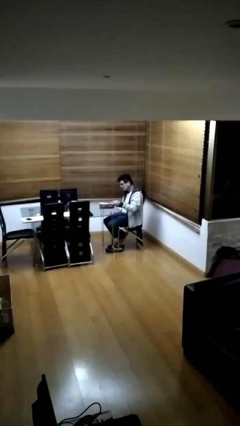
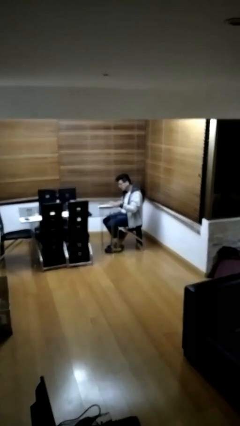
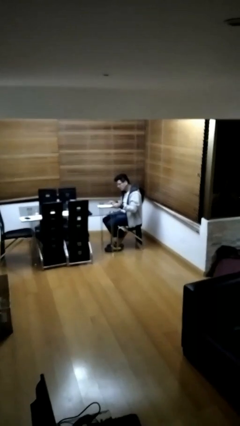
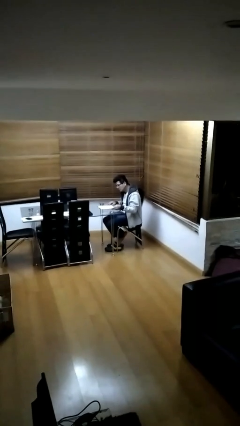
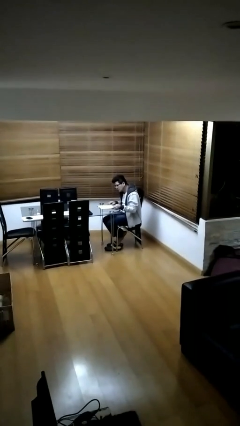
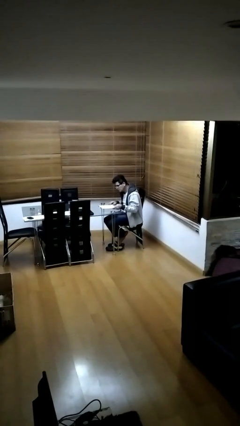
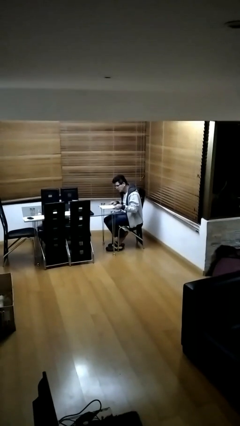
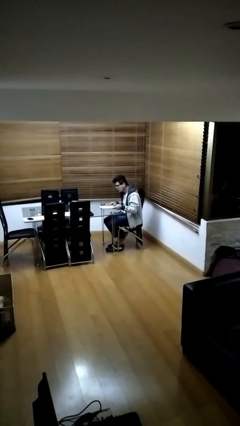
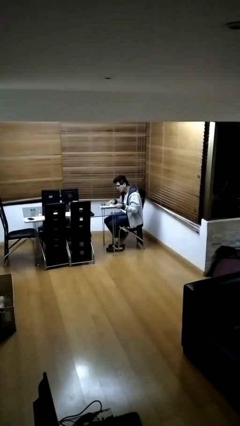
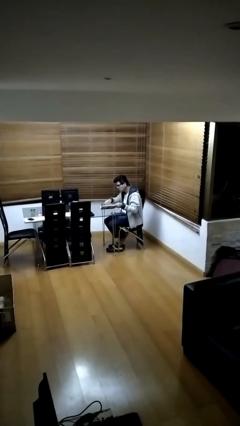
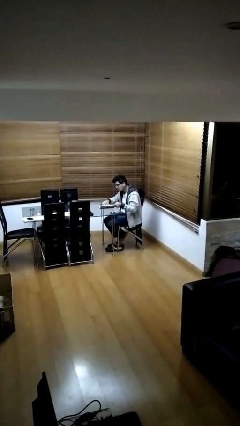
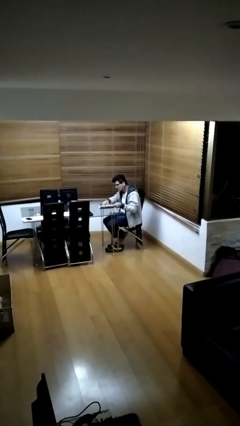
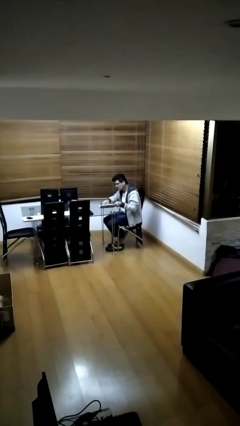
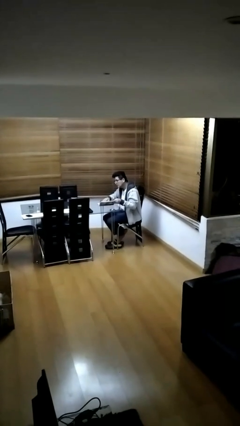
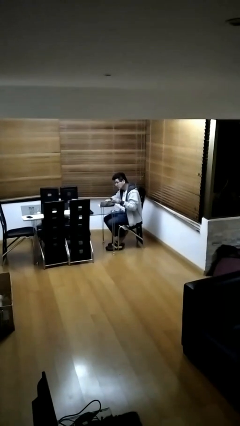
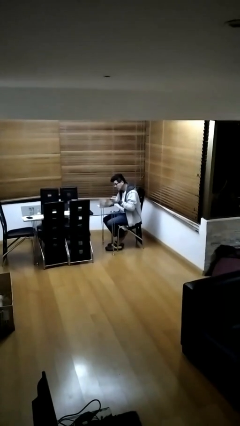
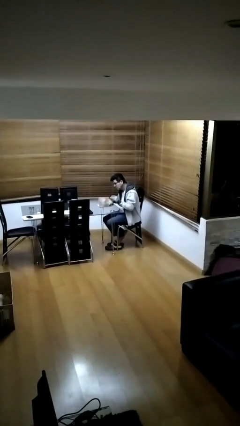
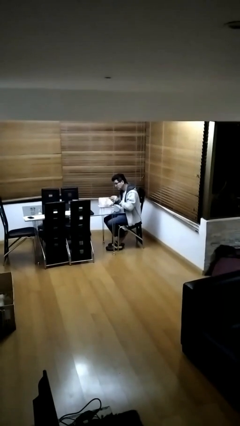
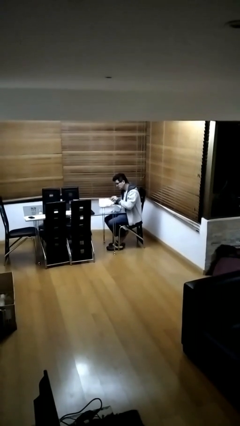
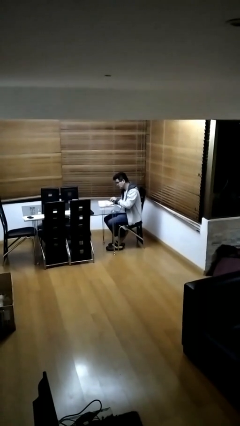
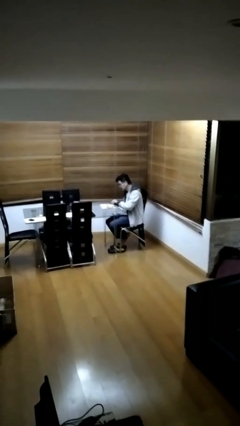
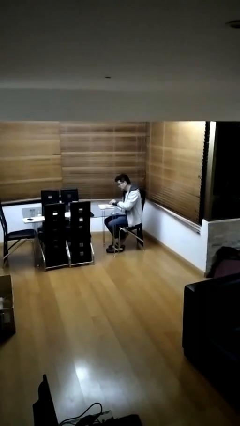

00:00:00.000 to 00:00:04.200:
person reads document

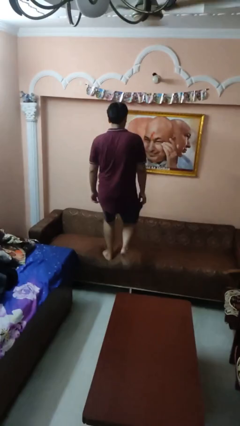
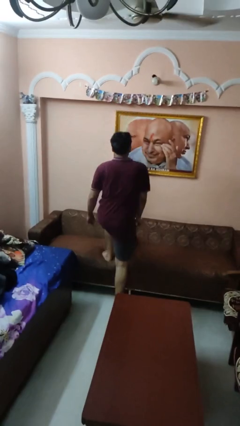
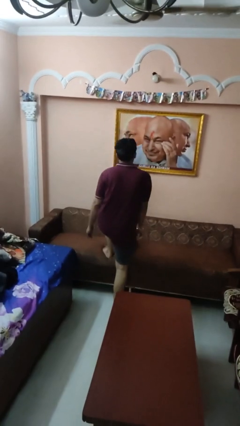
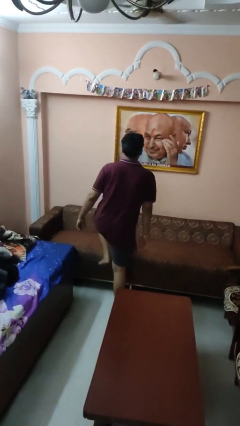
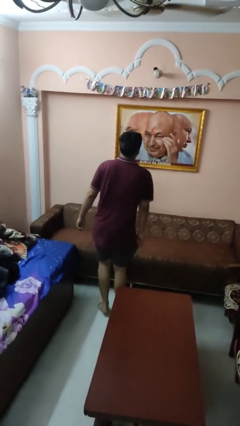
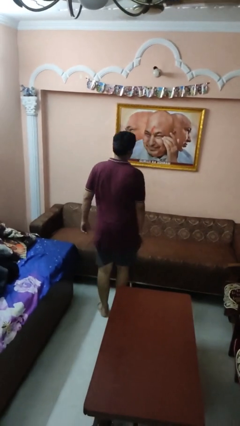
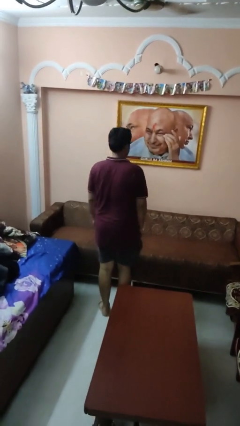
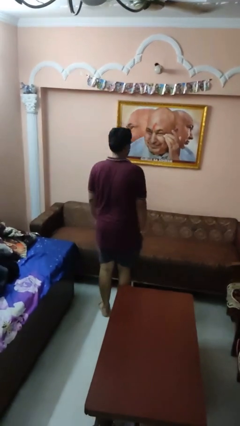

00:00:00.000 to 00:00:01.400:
person climbs off couch

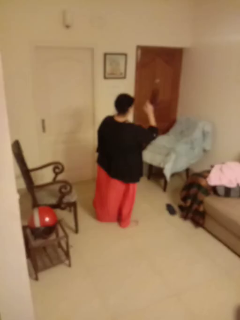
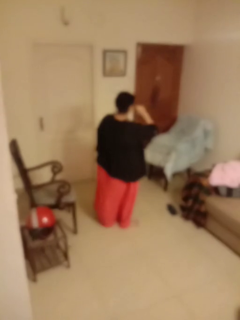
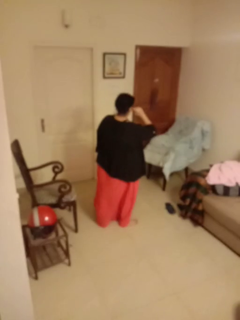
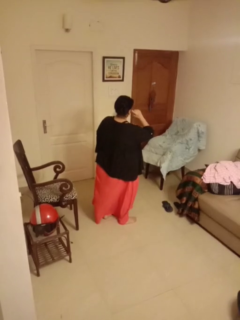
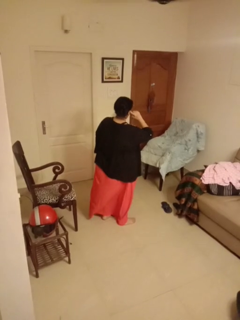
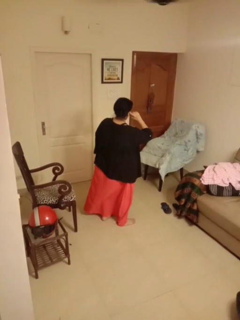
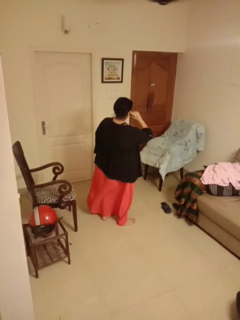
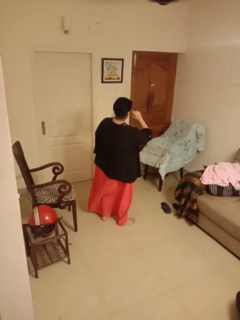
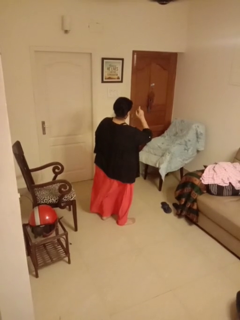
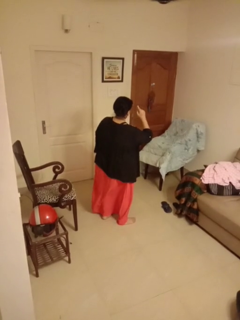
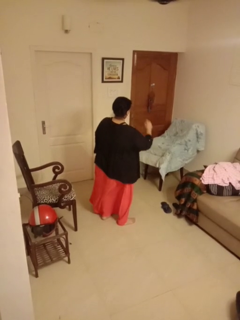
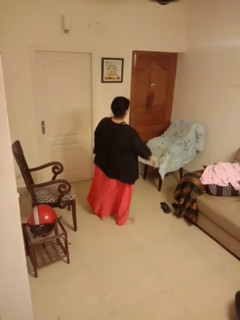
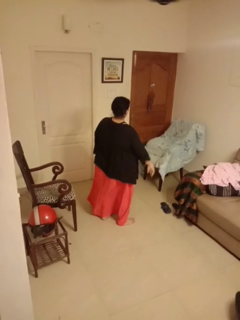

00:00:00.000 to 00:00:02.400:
person gestures listen closely

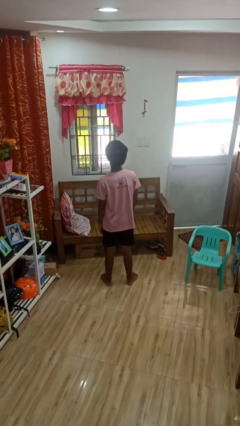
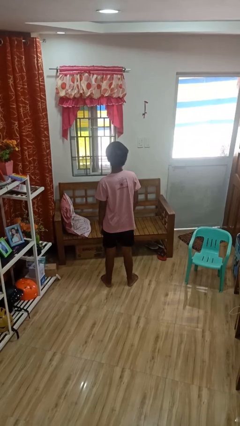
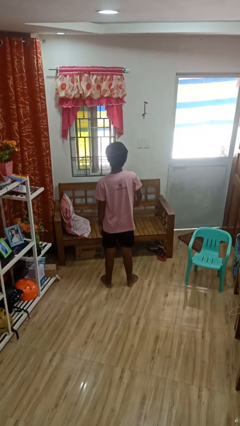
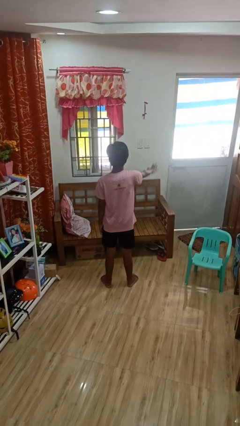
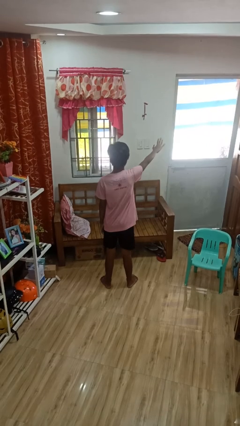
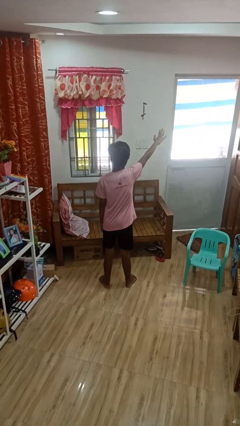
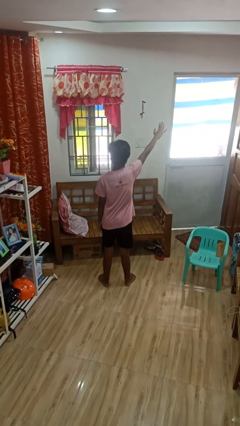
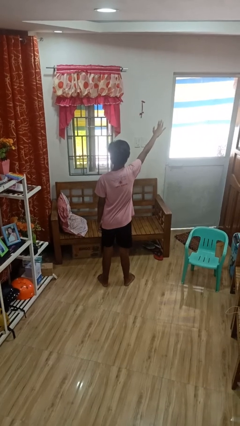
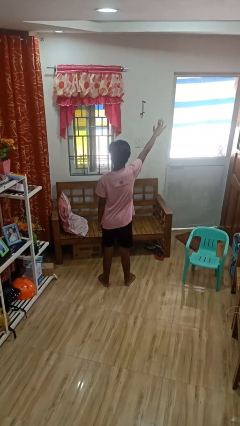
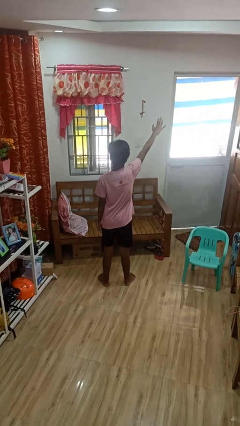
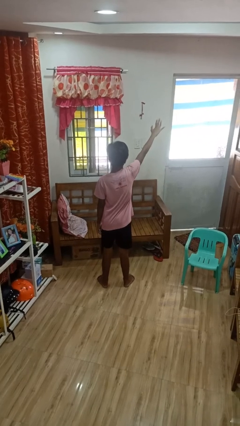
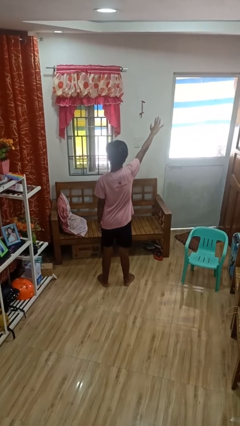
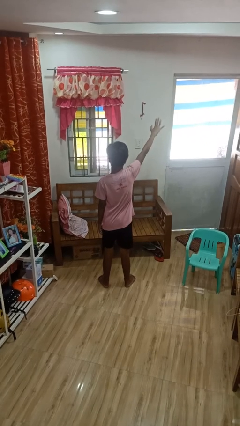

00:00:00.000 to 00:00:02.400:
person gestures stop

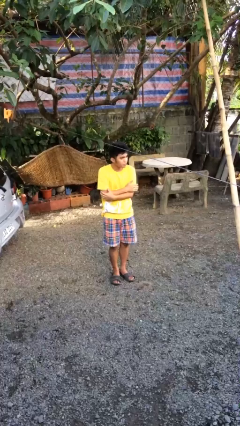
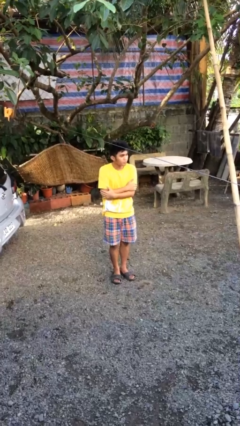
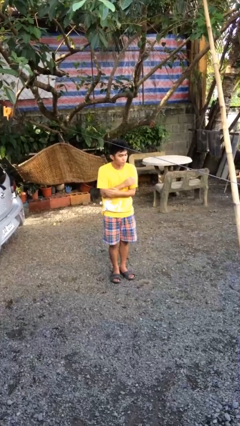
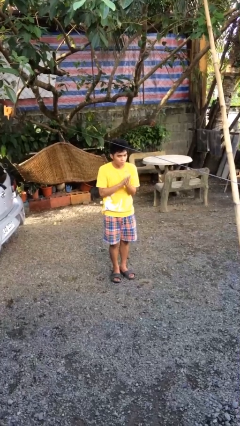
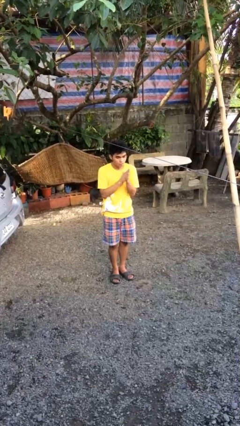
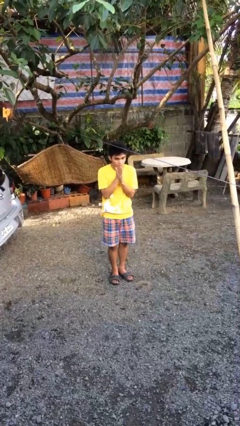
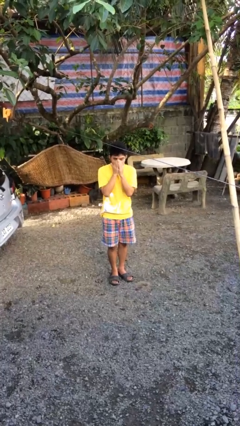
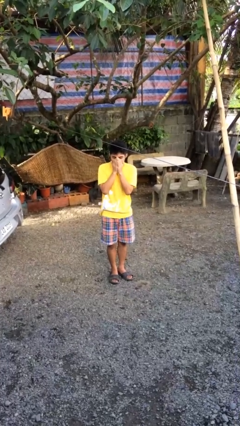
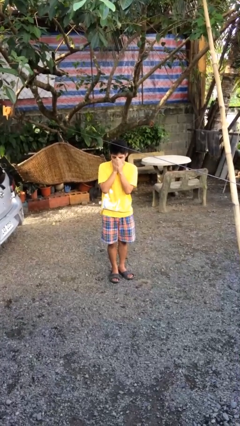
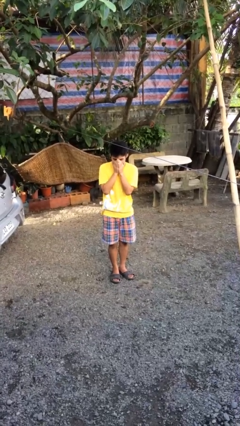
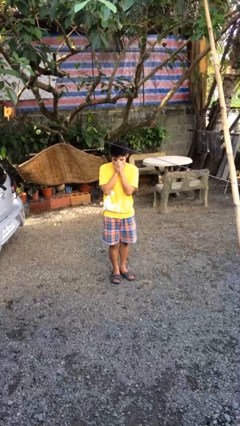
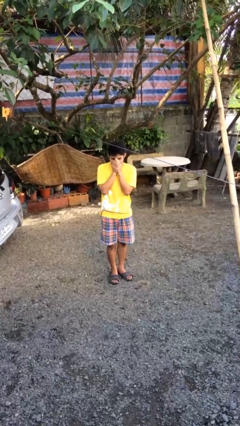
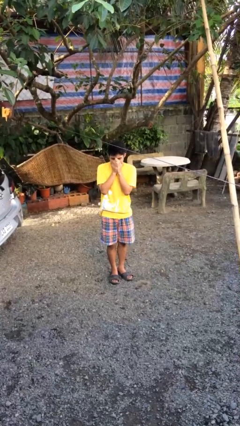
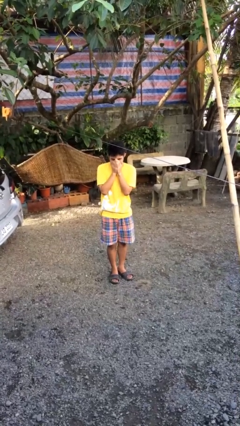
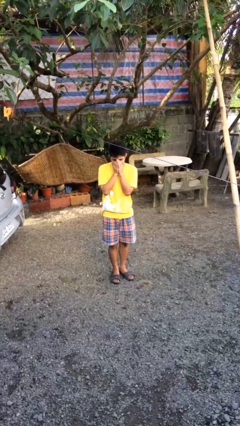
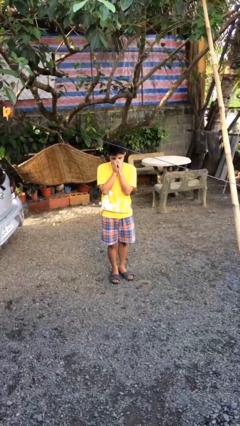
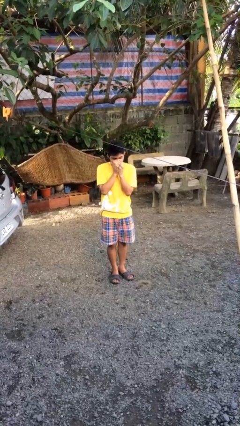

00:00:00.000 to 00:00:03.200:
person blows into hands

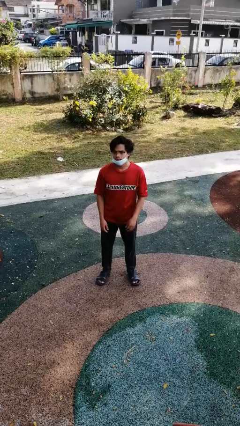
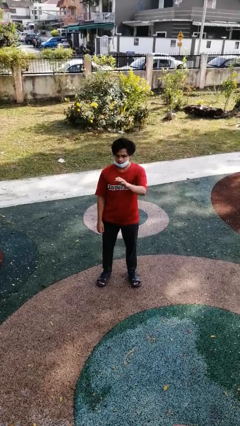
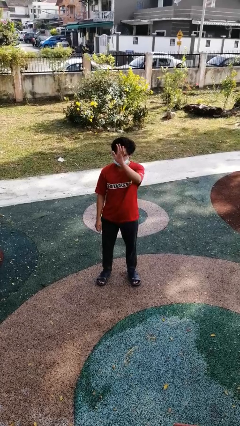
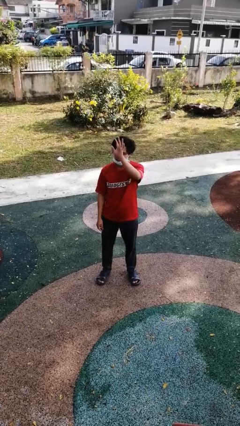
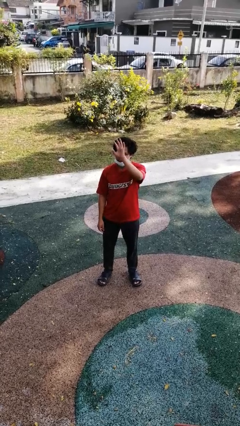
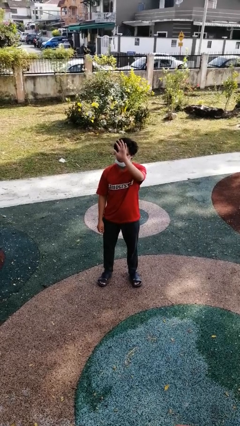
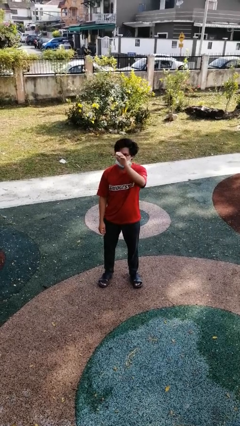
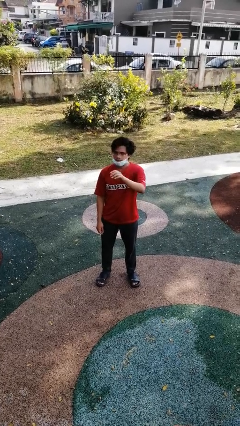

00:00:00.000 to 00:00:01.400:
person waves at person

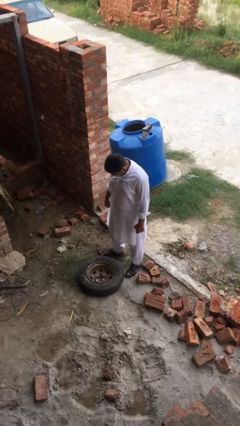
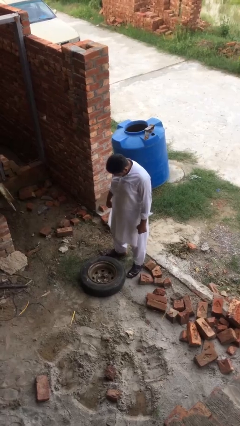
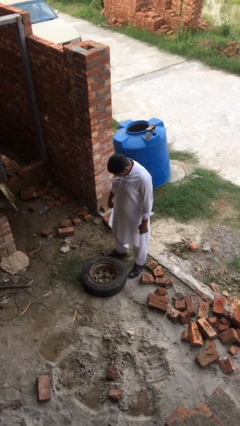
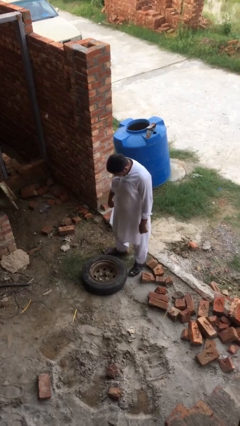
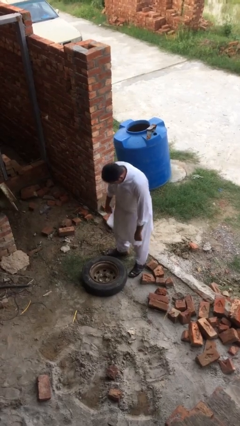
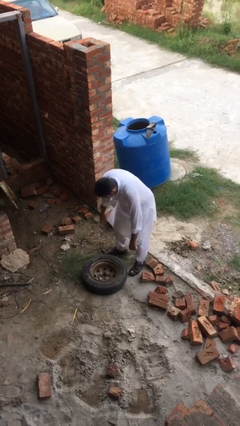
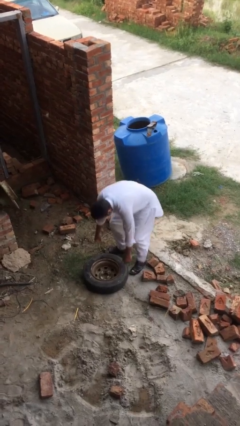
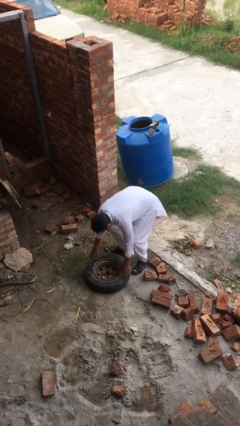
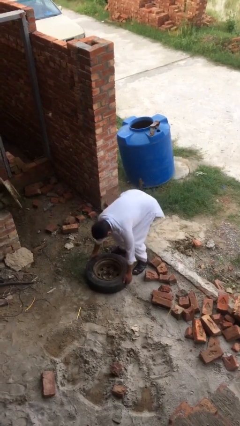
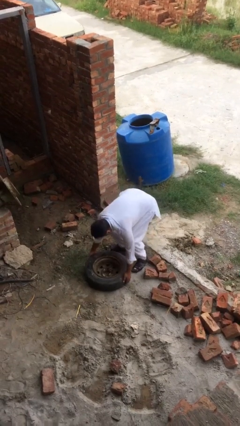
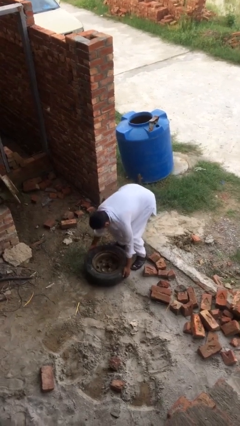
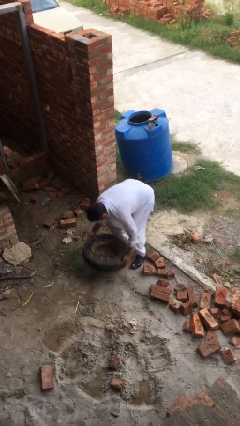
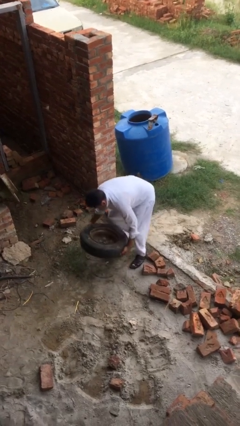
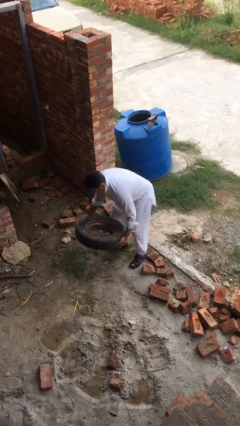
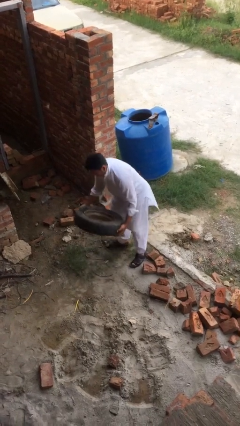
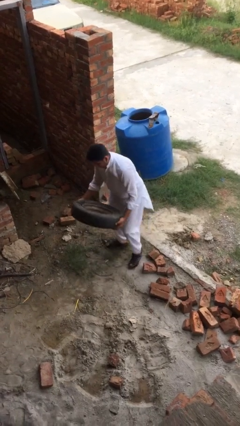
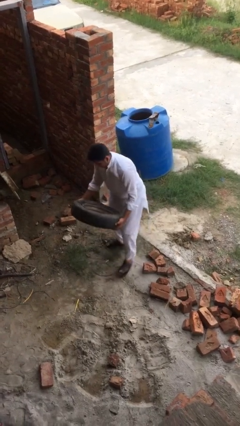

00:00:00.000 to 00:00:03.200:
person picks up object from floor
